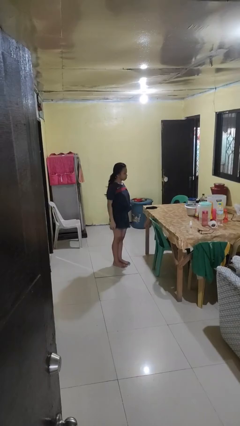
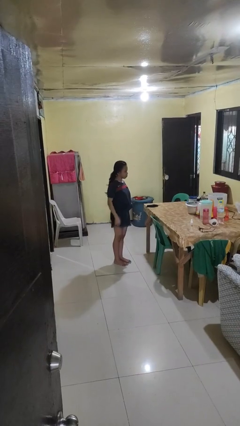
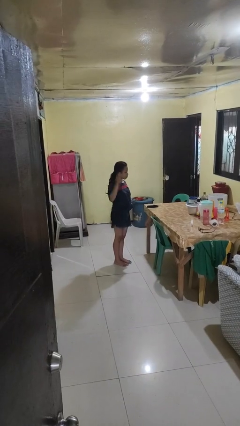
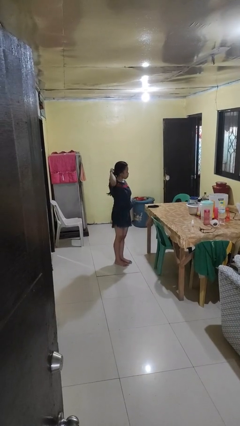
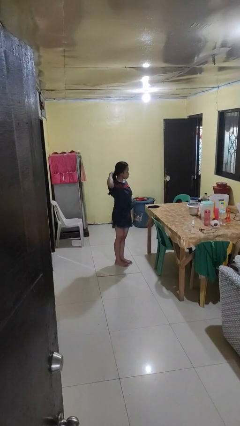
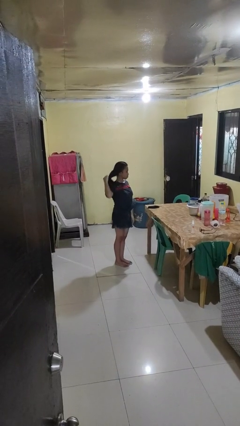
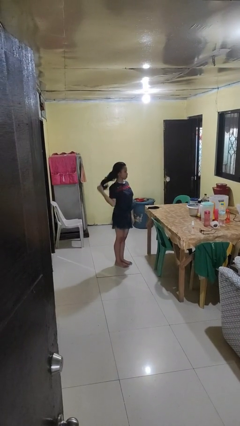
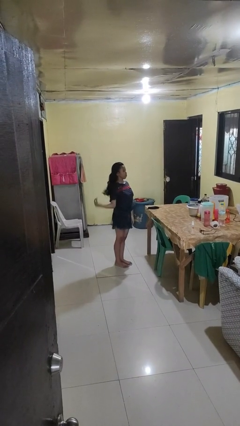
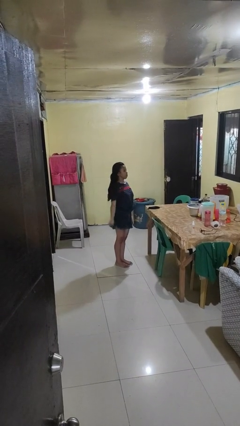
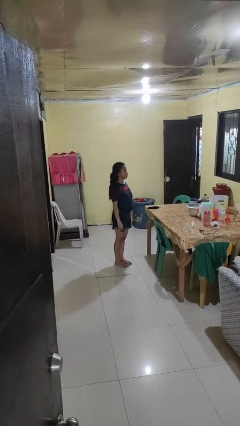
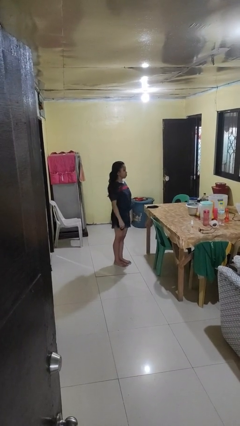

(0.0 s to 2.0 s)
person takes off hairtie

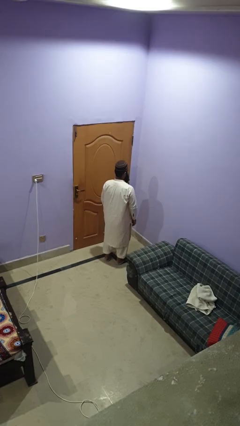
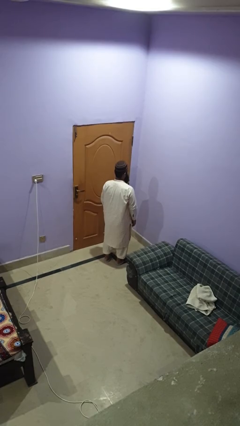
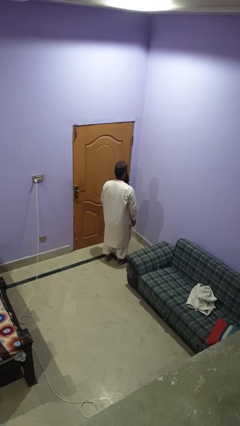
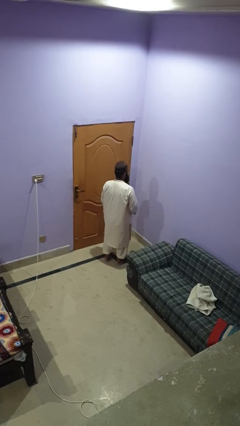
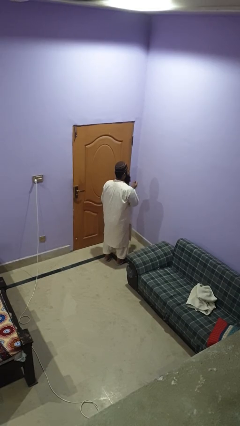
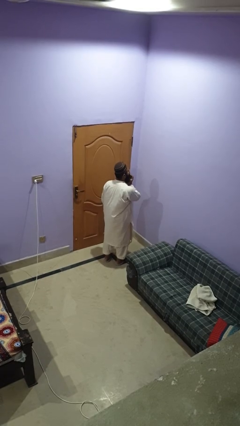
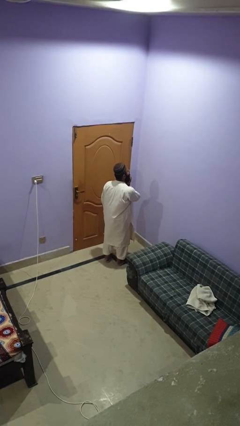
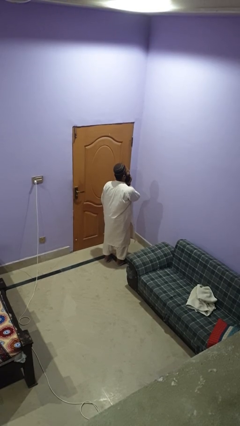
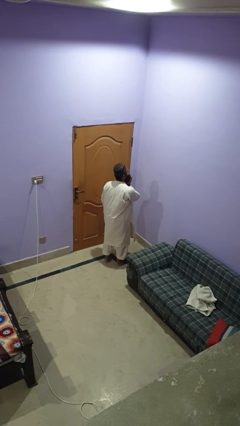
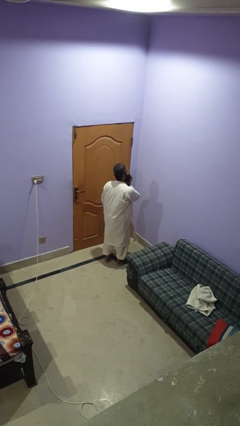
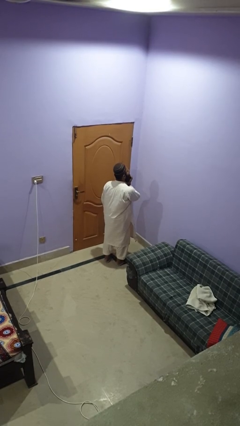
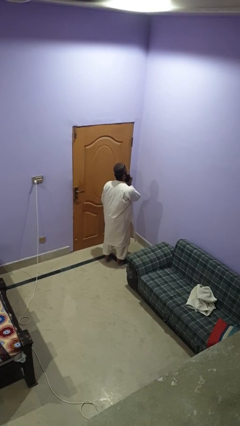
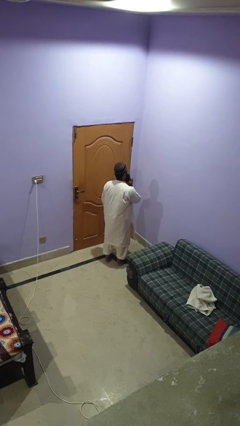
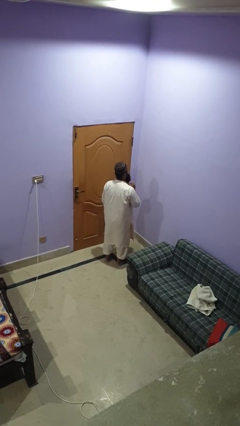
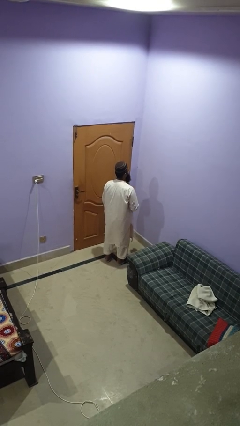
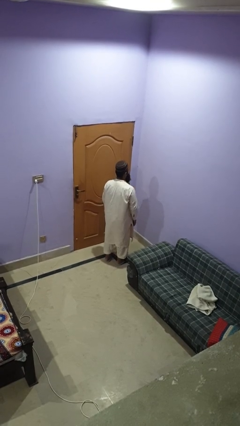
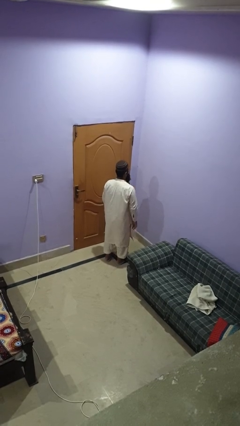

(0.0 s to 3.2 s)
person strokes chin

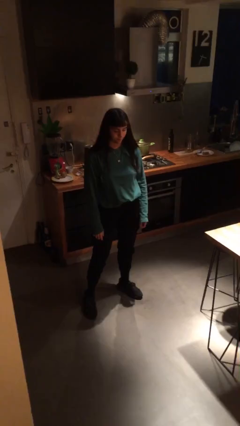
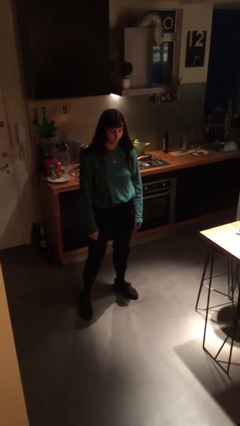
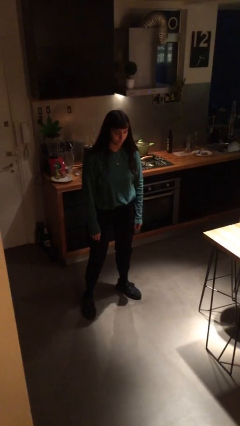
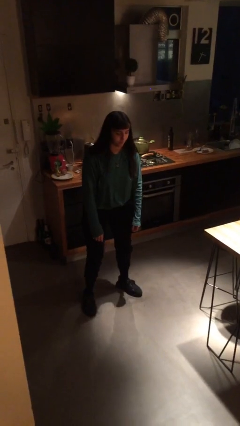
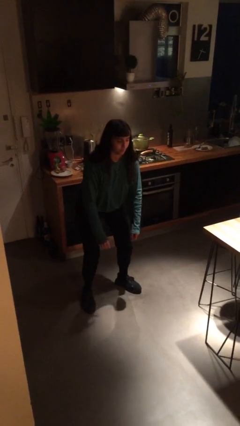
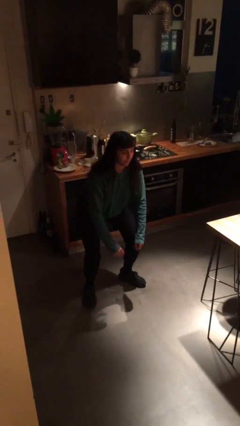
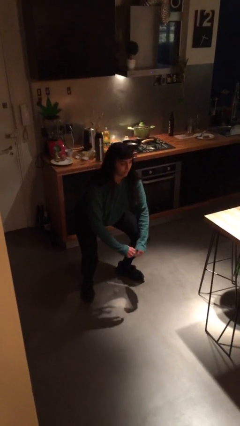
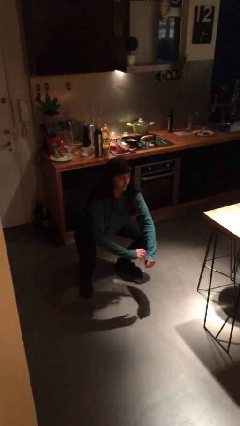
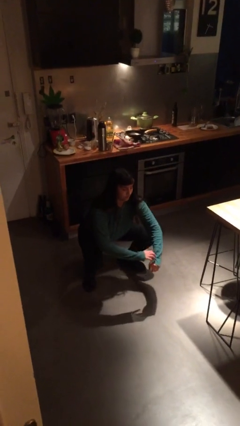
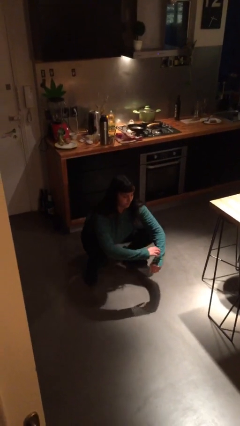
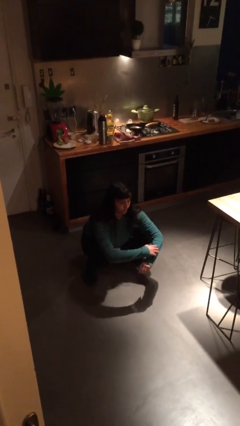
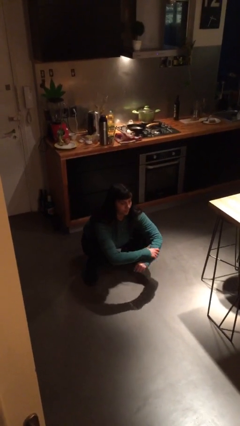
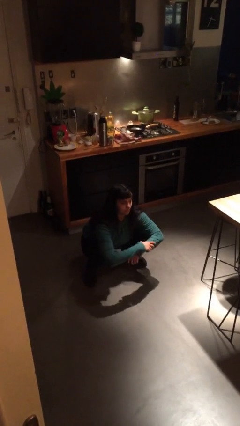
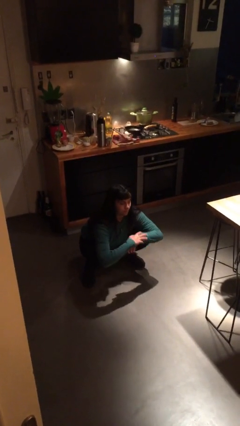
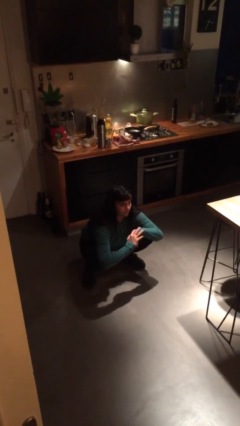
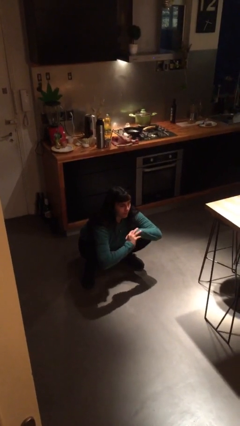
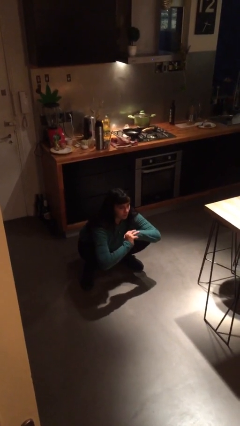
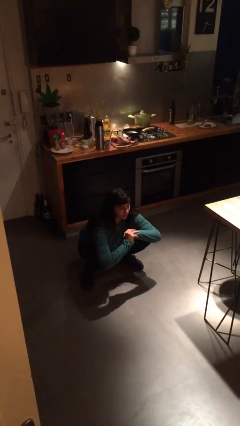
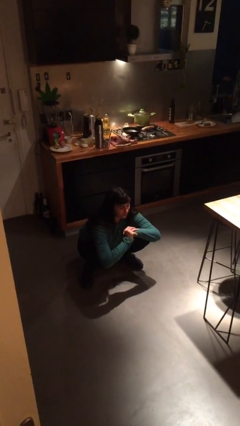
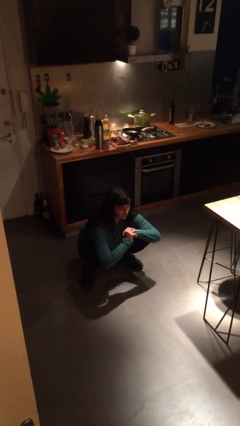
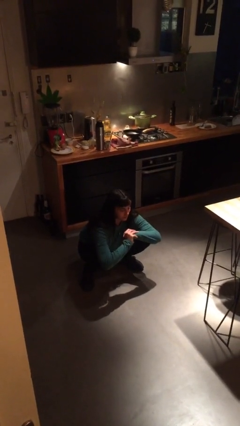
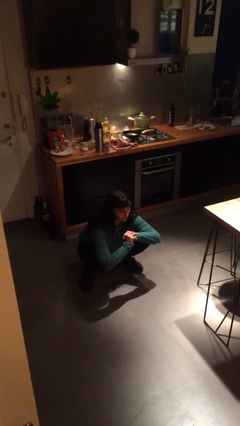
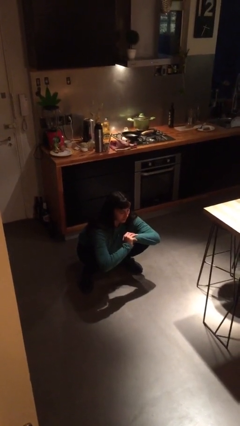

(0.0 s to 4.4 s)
person squats

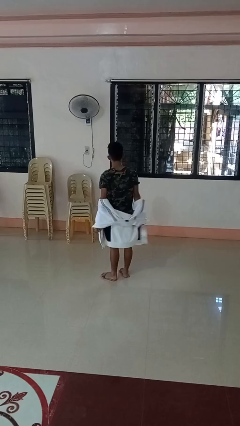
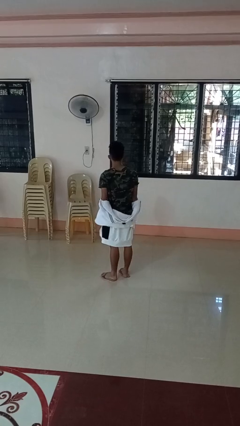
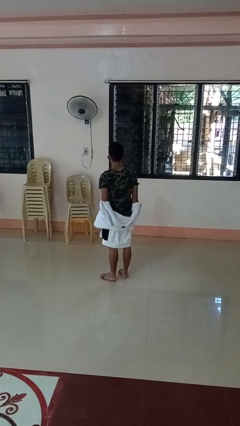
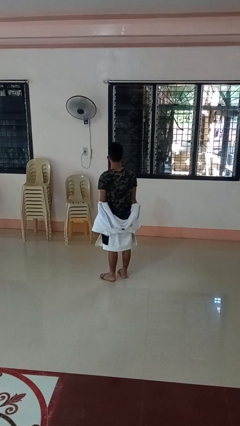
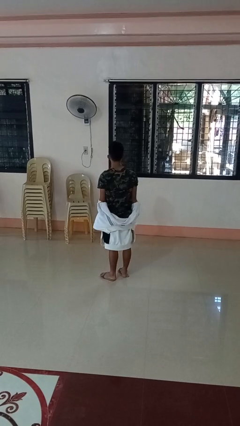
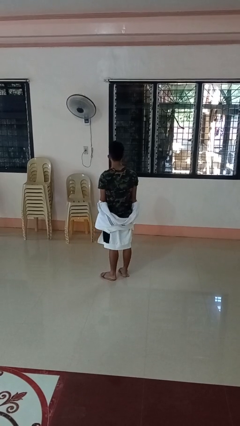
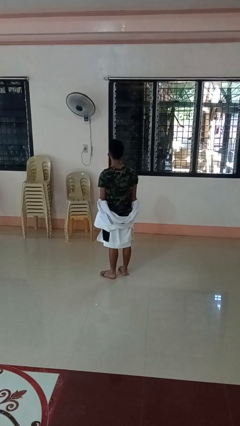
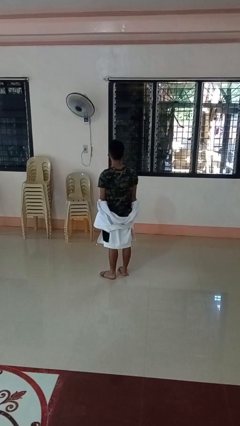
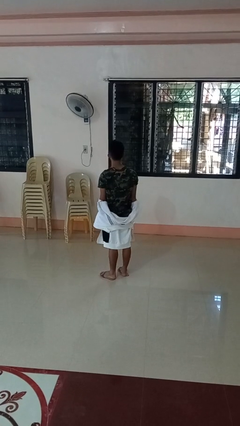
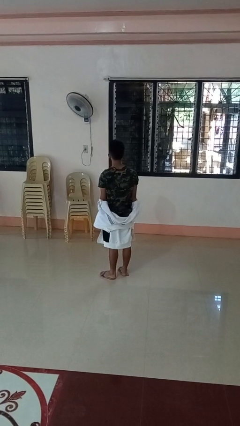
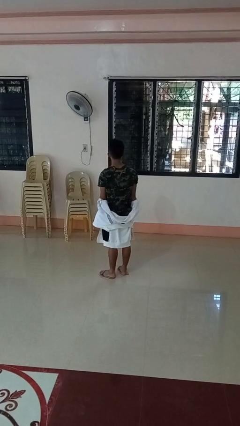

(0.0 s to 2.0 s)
person takes off jacket

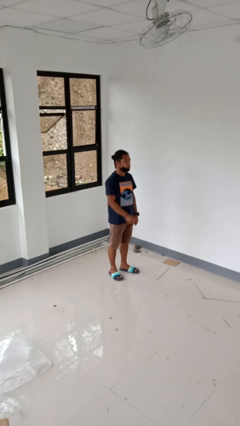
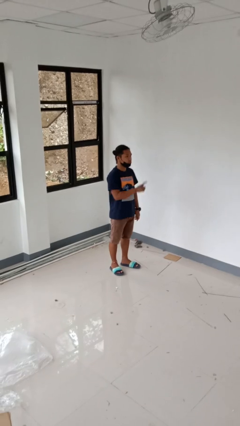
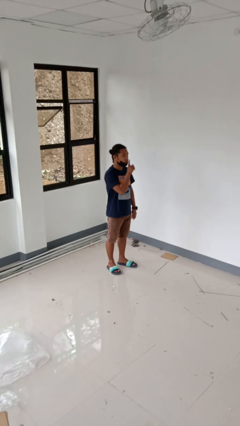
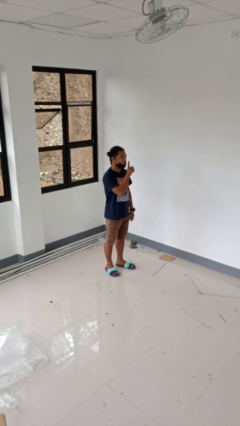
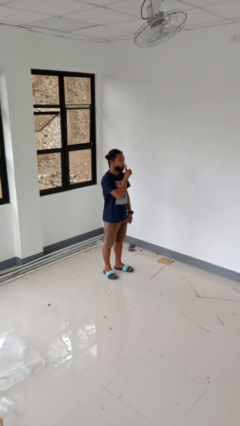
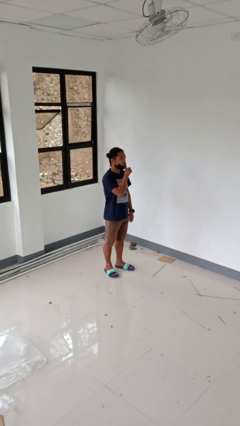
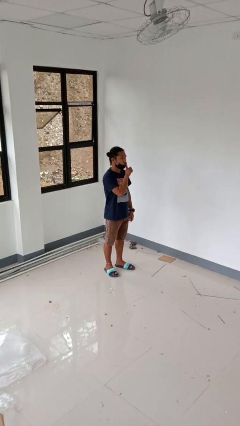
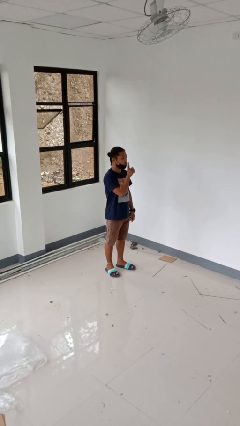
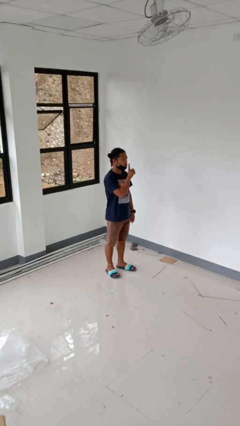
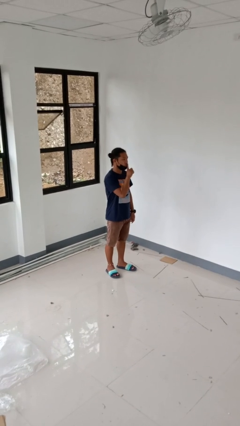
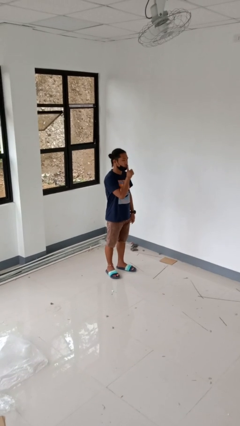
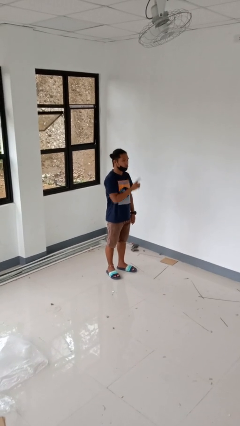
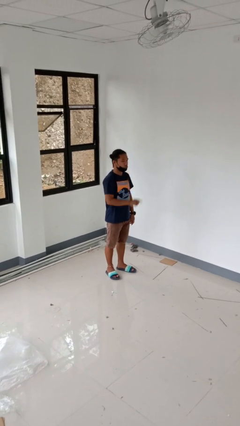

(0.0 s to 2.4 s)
person gestures be quiet

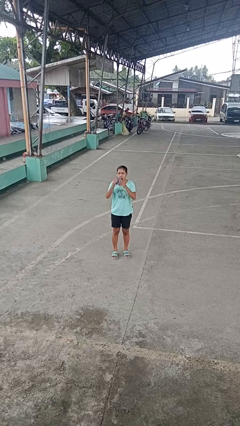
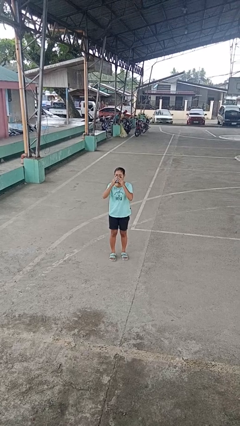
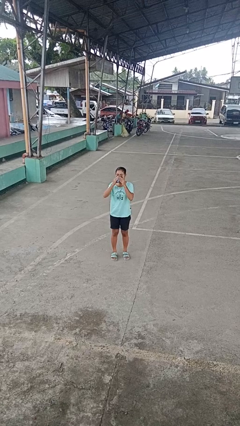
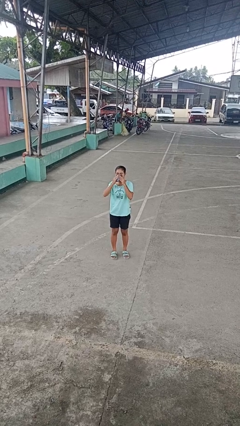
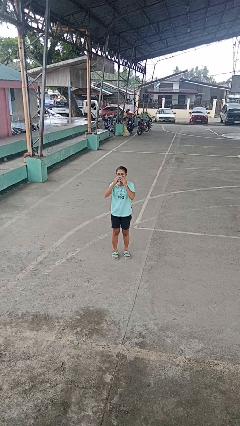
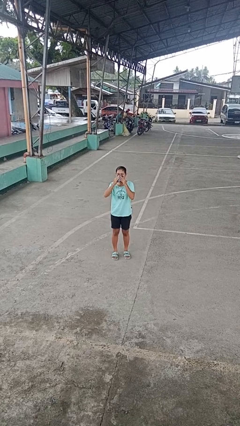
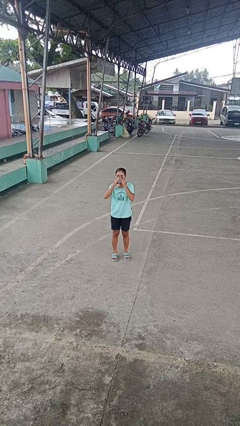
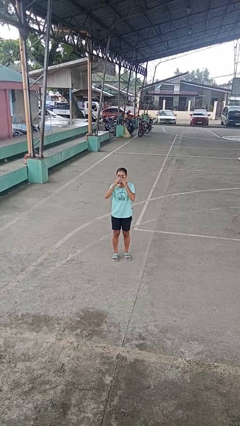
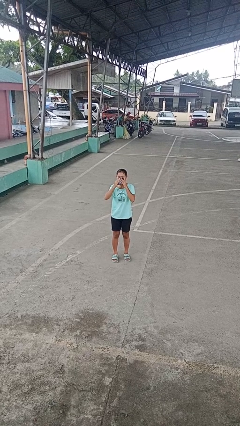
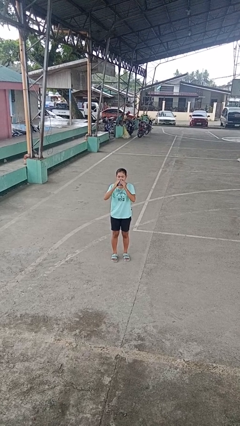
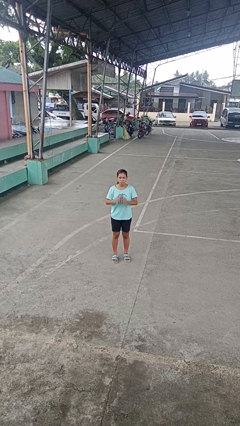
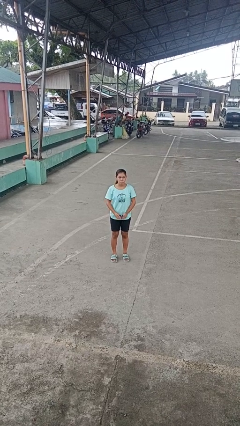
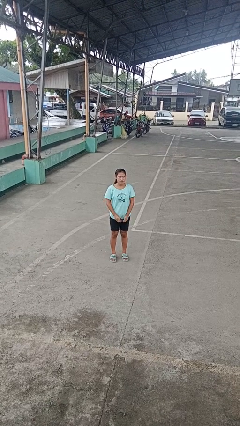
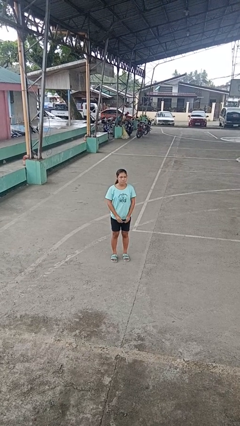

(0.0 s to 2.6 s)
person blows nose

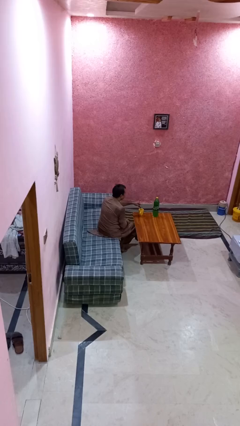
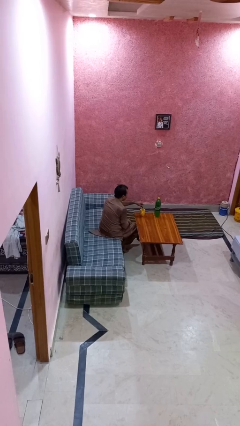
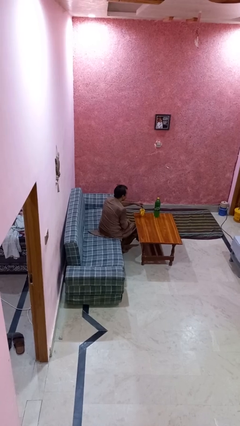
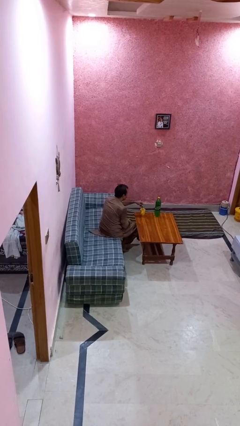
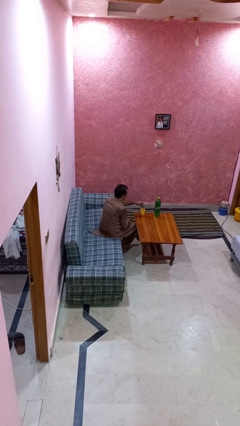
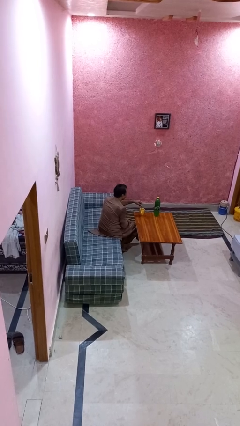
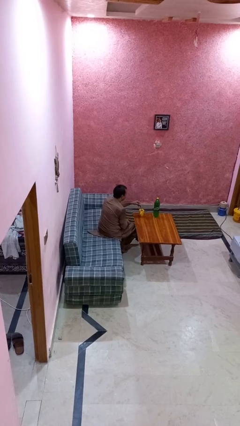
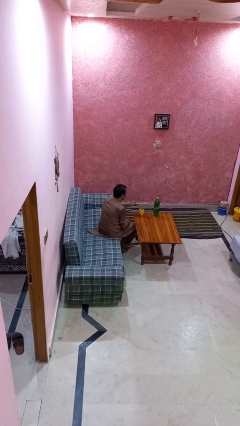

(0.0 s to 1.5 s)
person stirs mug
